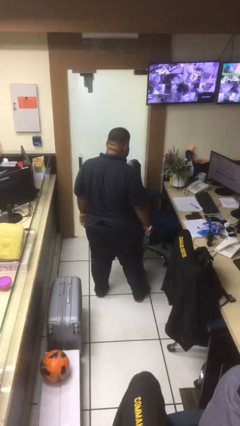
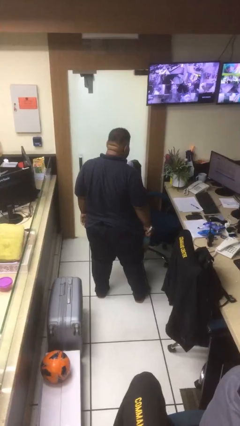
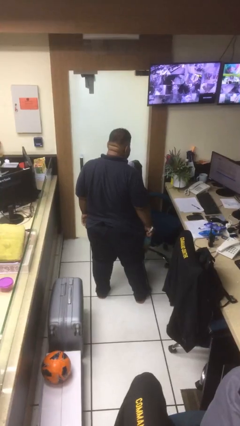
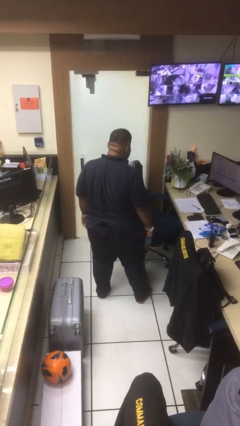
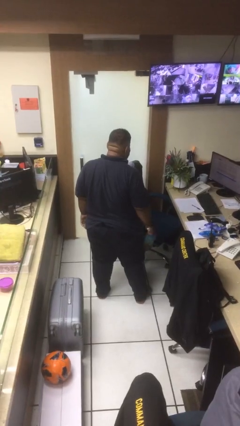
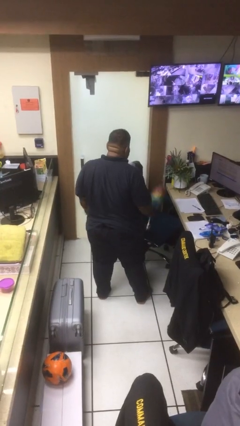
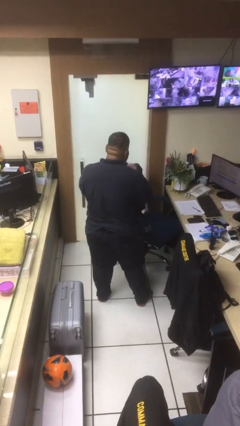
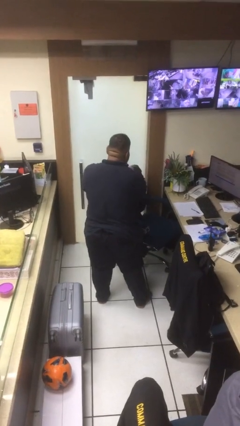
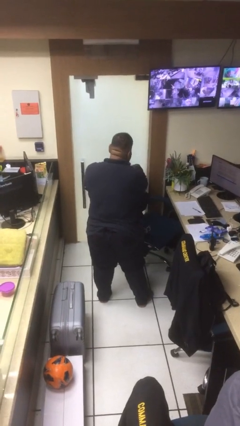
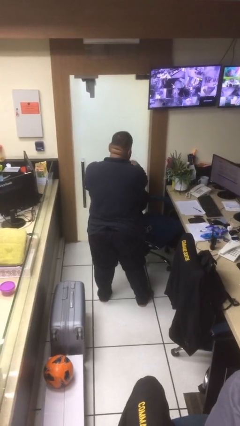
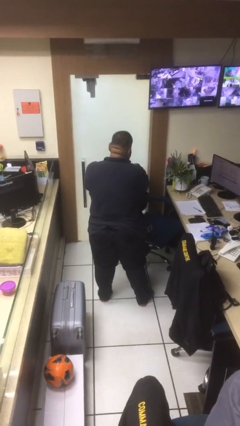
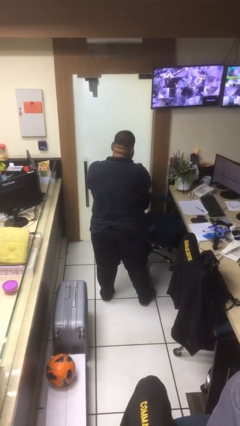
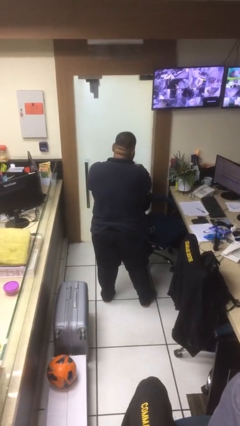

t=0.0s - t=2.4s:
person dusts furniture

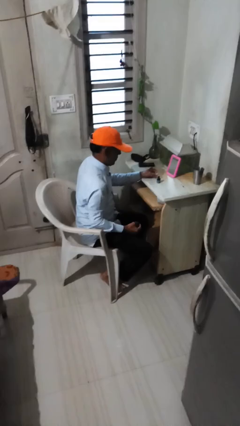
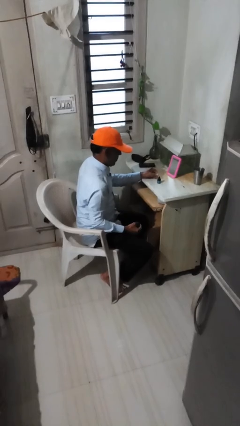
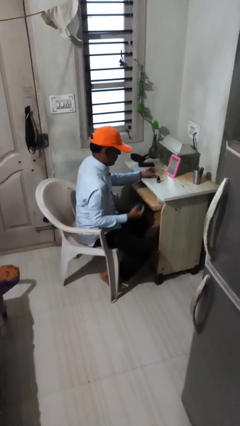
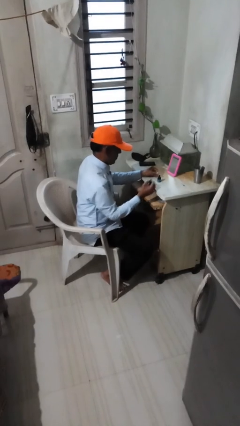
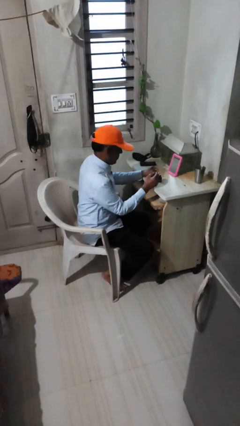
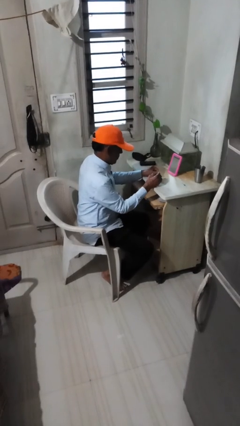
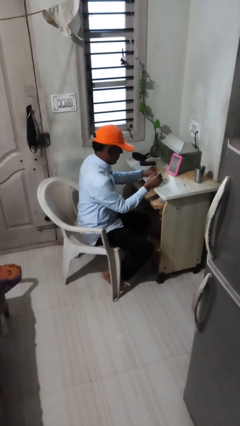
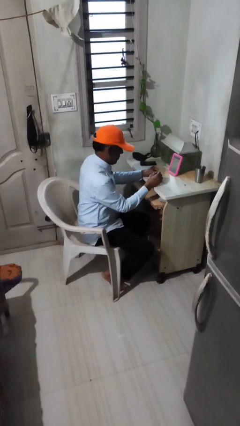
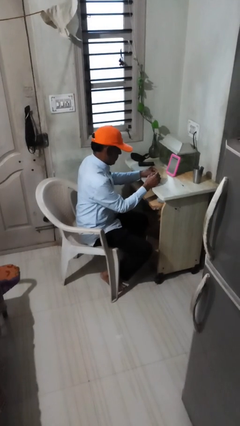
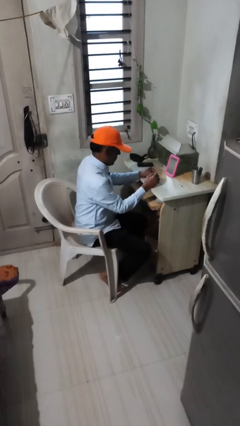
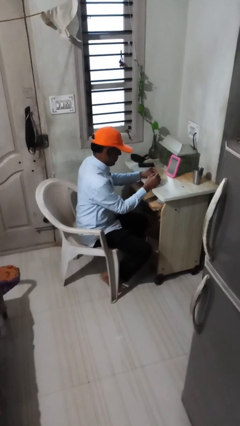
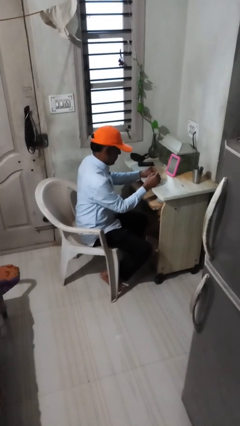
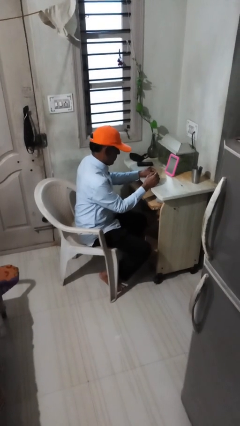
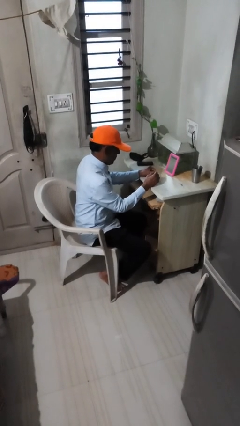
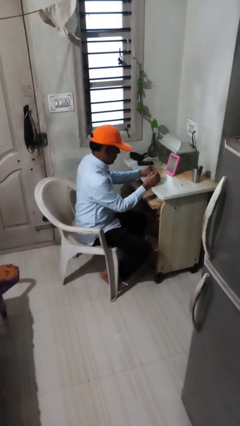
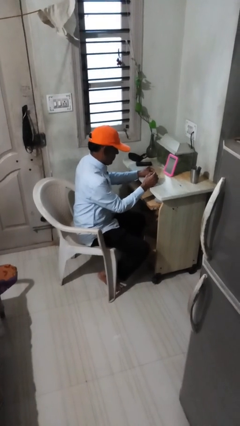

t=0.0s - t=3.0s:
person paints fingernails

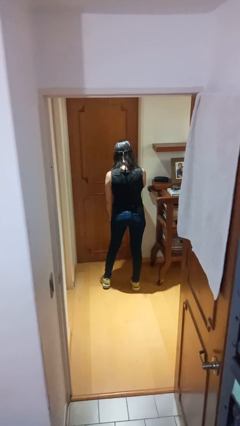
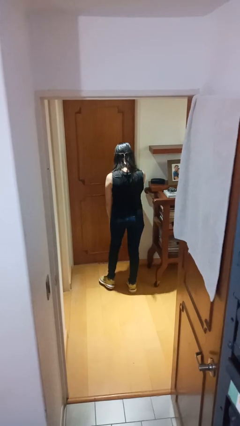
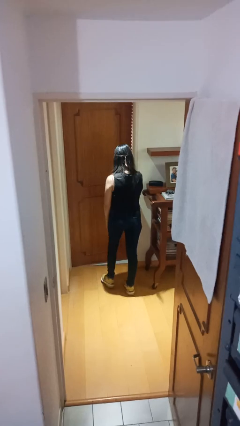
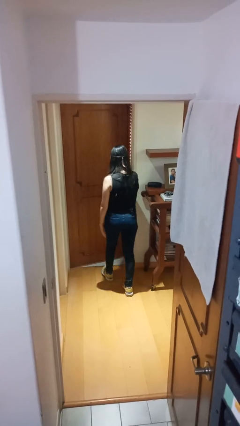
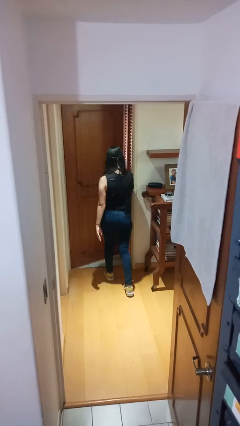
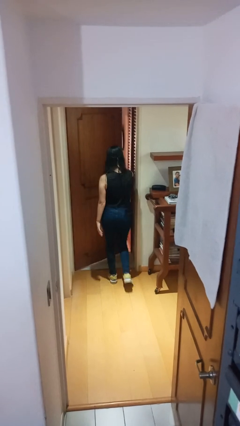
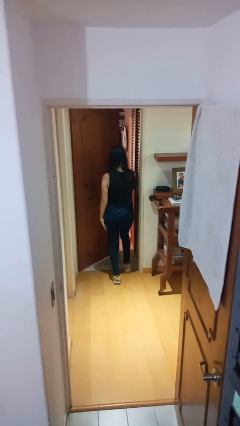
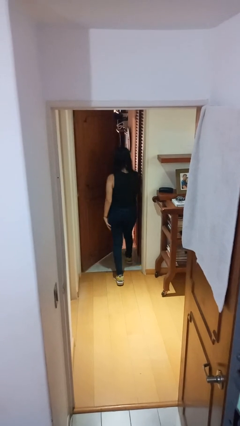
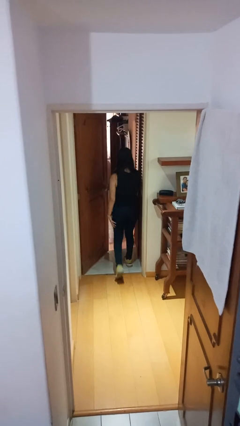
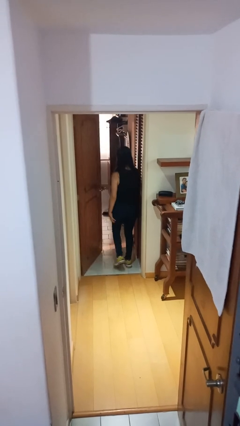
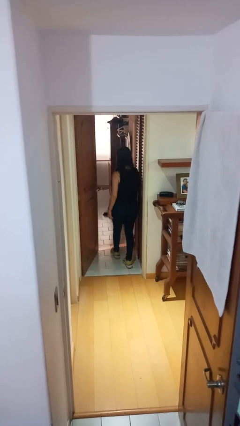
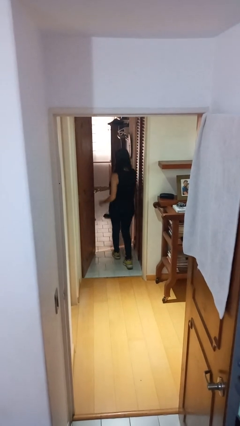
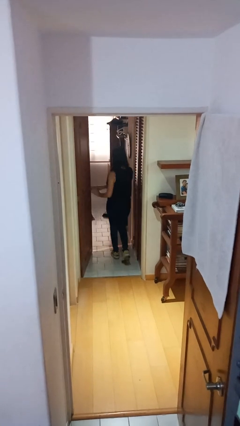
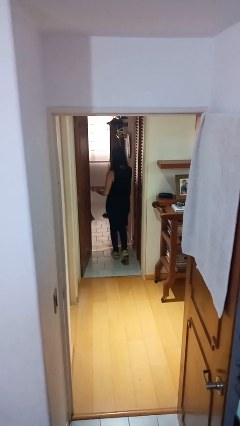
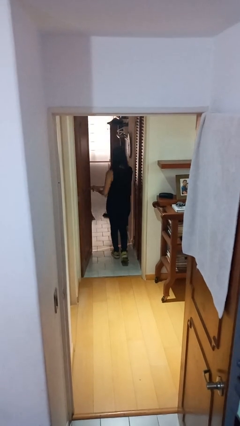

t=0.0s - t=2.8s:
person opens facility door

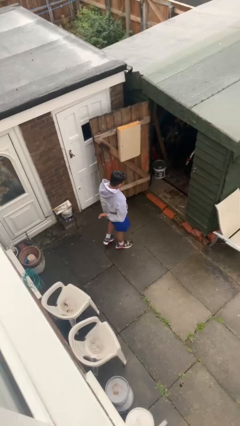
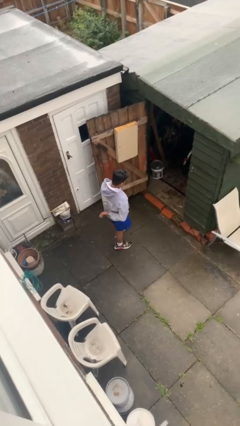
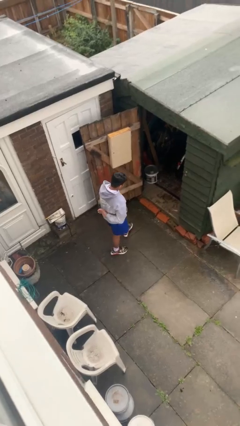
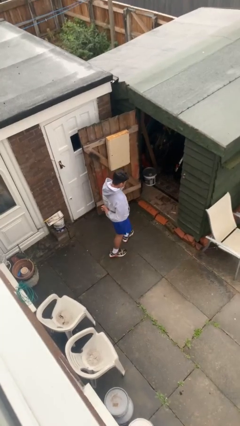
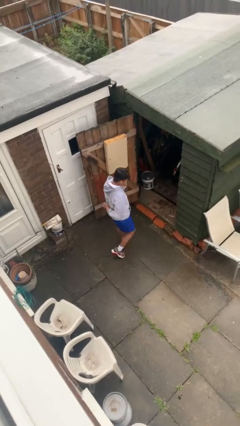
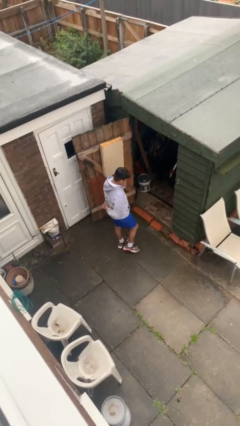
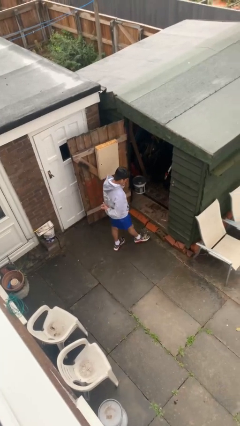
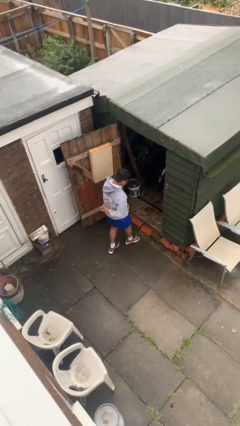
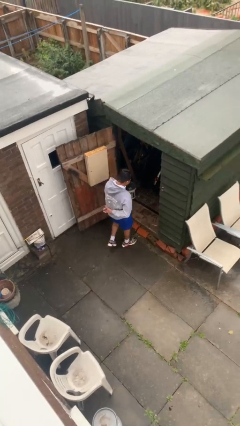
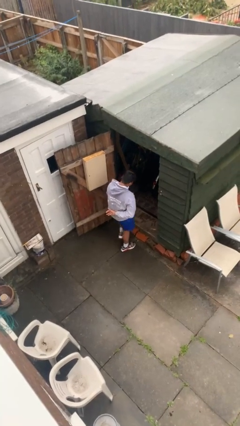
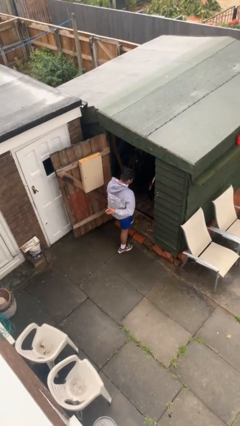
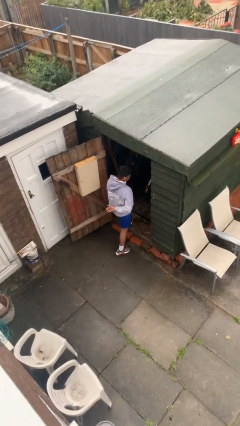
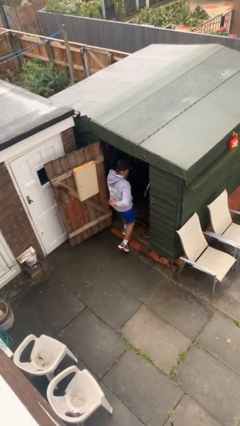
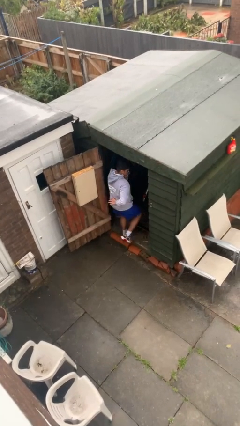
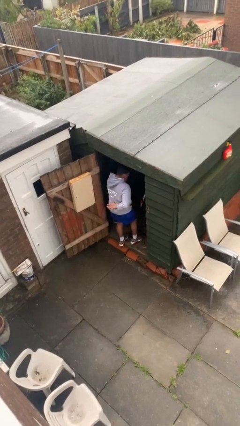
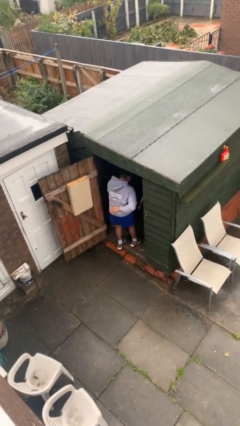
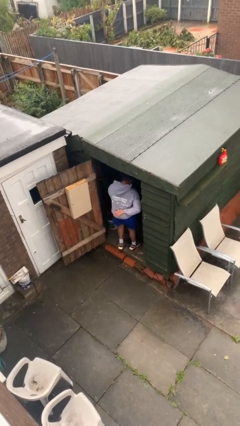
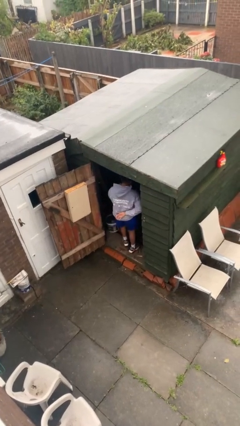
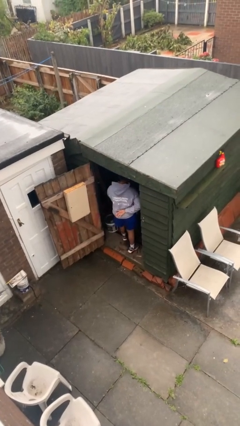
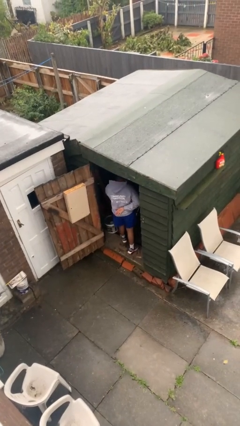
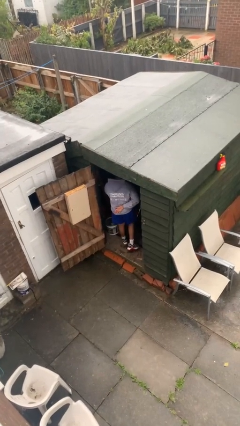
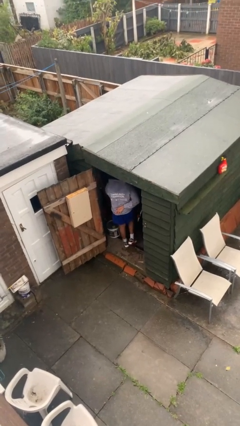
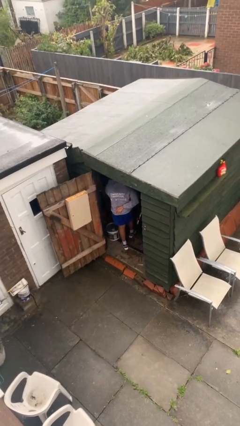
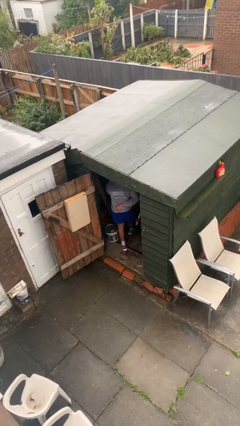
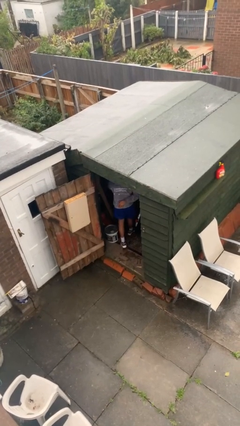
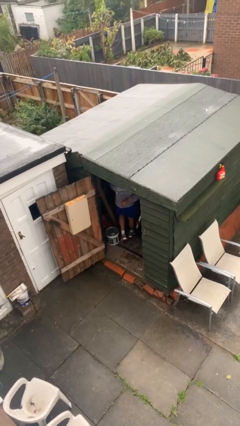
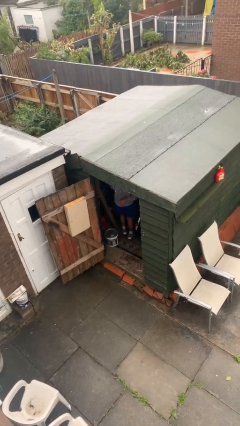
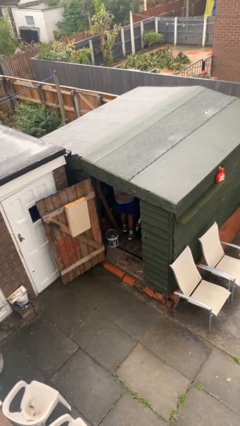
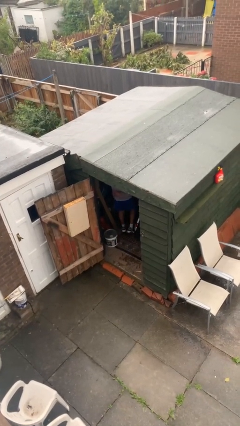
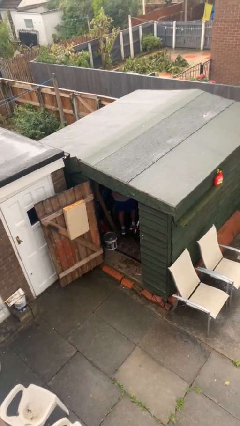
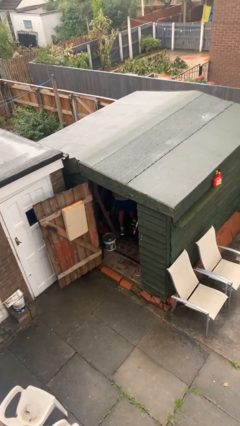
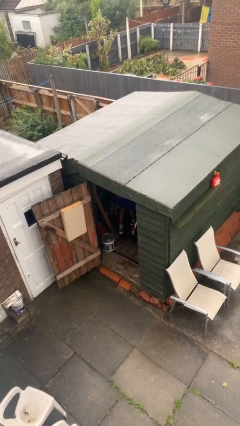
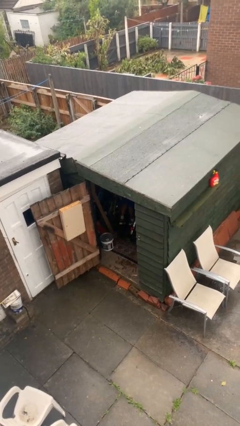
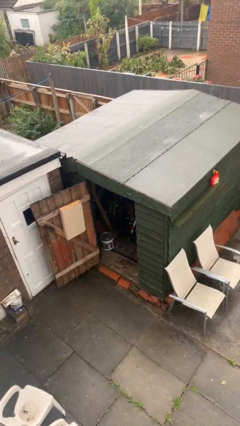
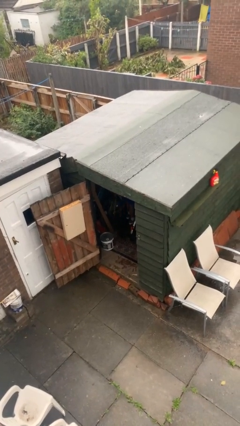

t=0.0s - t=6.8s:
person exits scene through structure

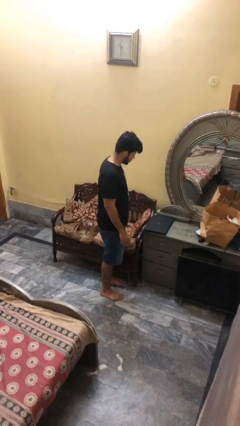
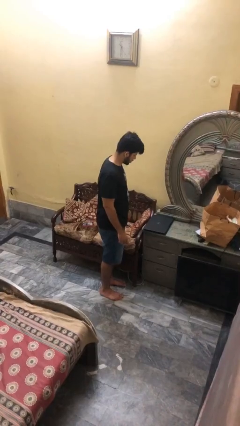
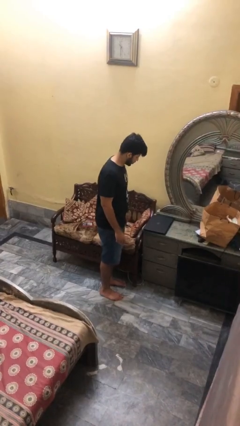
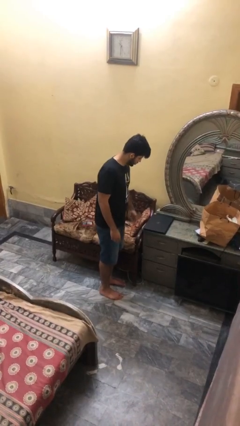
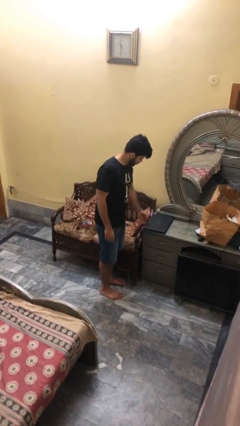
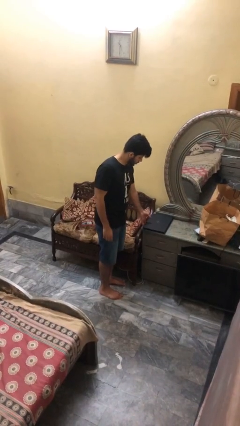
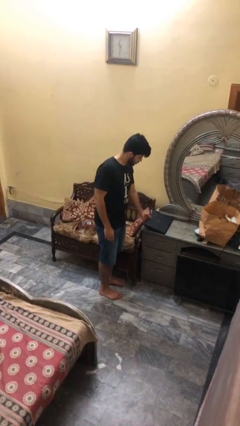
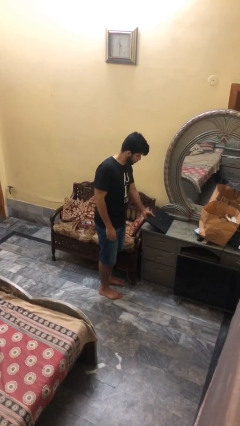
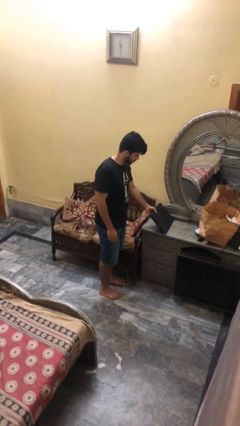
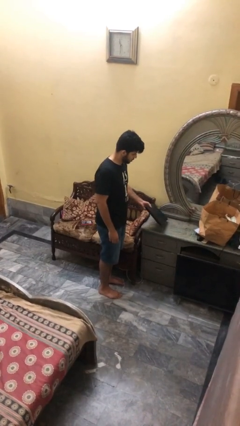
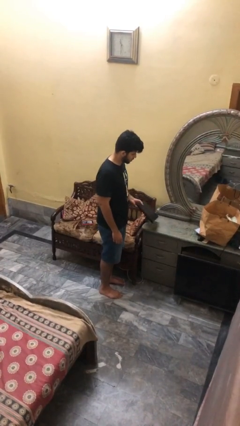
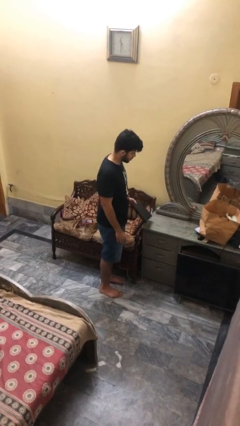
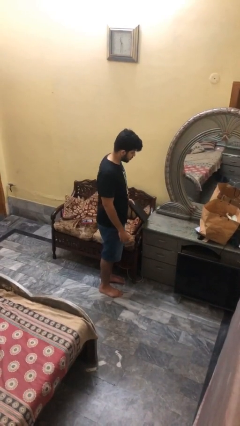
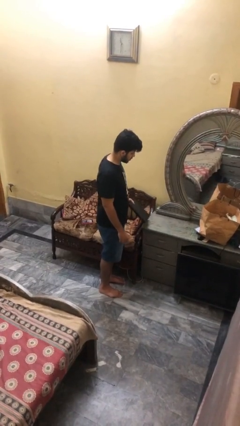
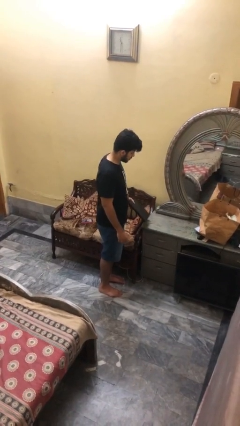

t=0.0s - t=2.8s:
person picks up object from countertop
